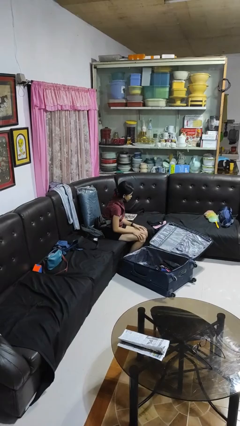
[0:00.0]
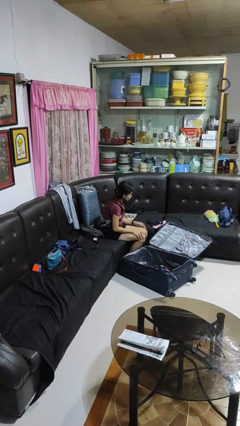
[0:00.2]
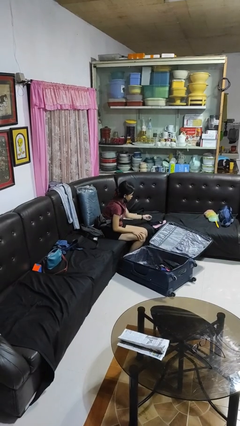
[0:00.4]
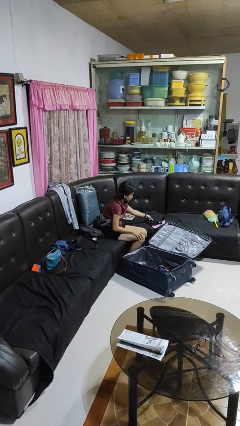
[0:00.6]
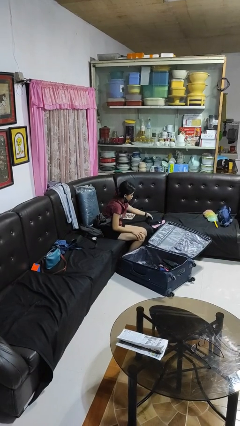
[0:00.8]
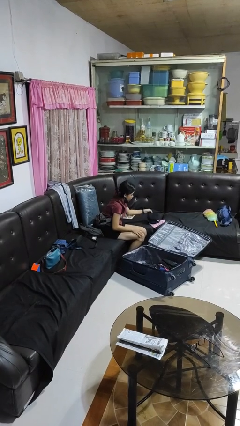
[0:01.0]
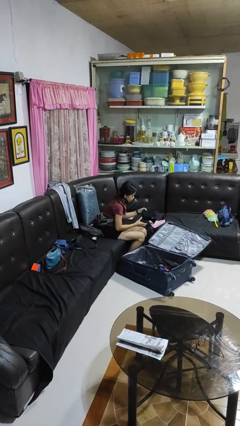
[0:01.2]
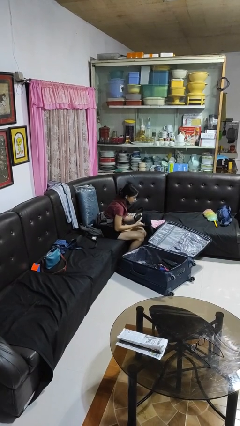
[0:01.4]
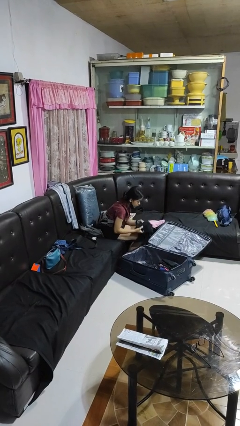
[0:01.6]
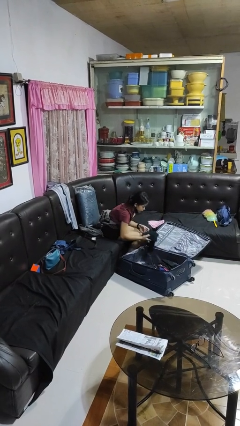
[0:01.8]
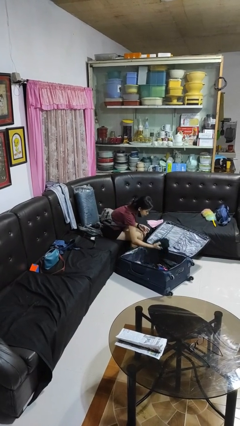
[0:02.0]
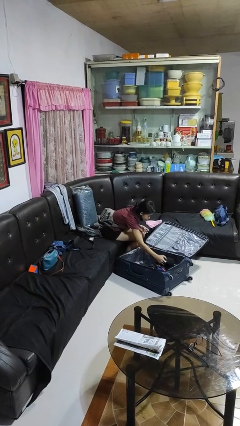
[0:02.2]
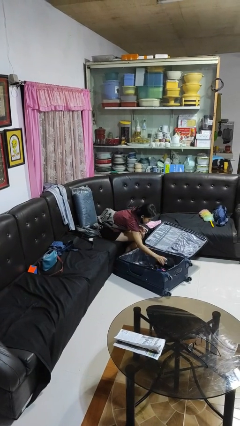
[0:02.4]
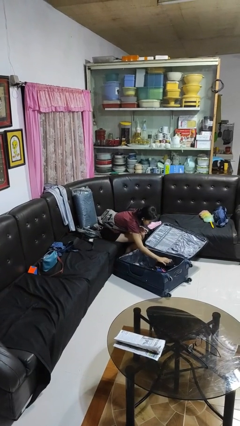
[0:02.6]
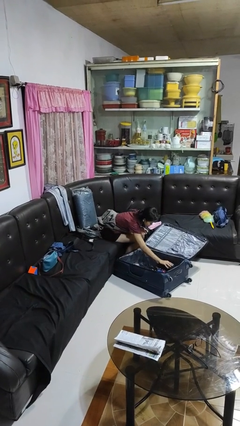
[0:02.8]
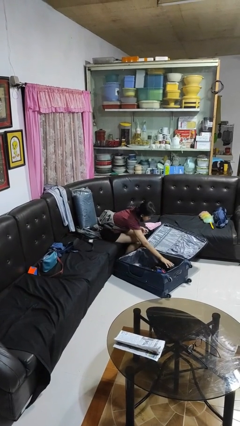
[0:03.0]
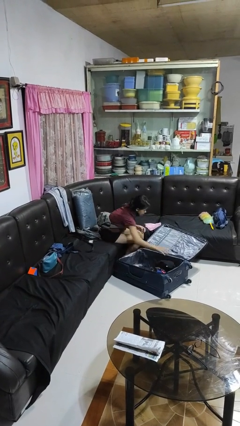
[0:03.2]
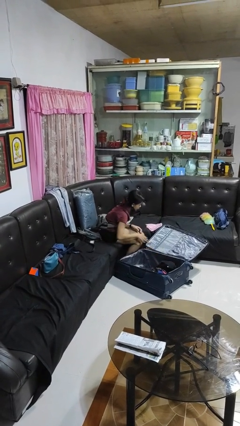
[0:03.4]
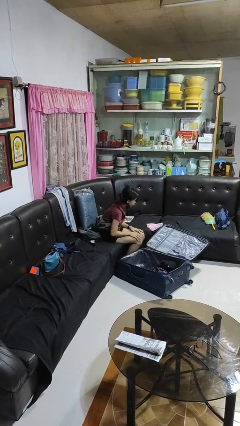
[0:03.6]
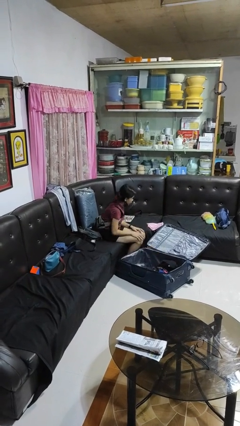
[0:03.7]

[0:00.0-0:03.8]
person loads clothes into suitcase

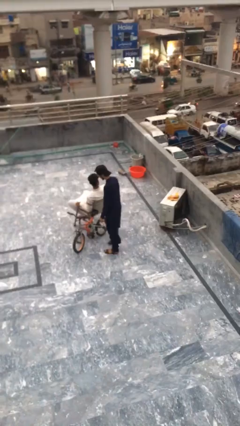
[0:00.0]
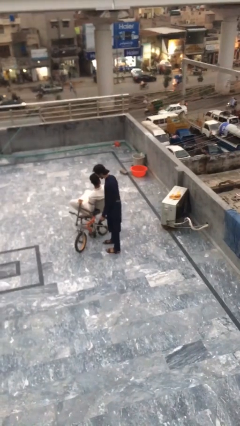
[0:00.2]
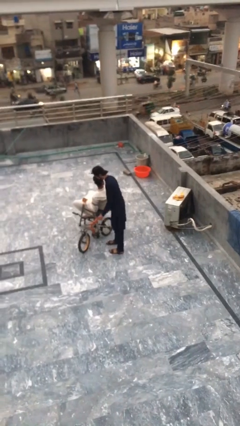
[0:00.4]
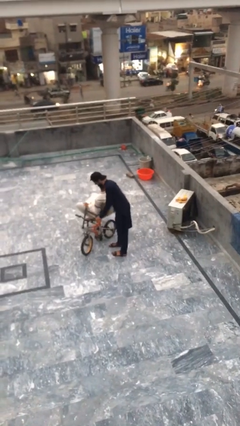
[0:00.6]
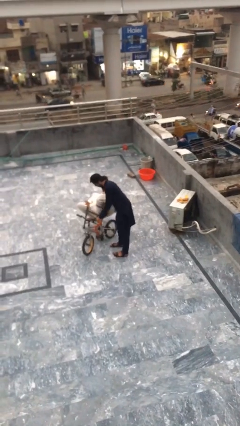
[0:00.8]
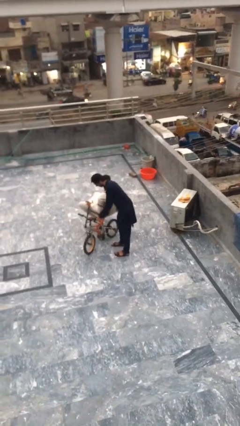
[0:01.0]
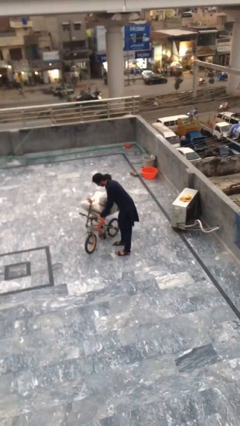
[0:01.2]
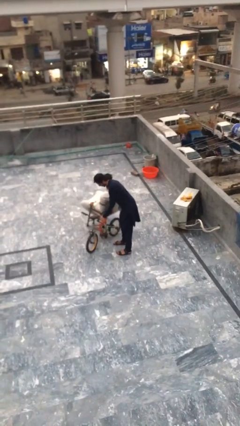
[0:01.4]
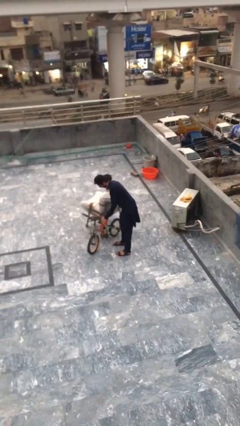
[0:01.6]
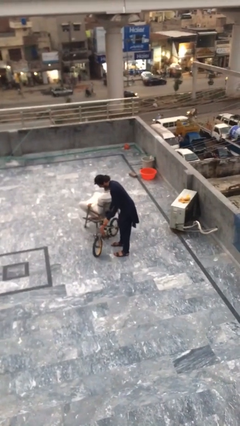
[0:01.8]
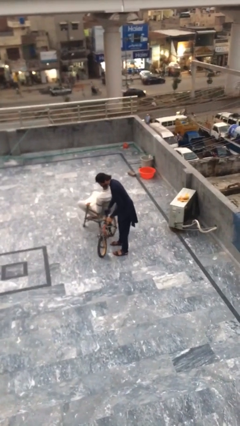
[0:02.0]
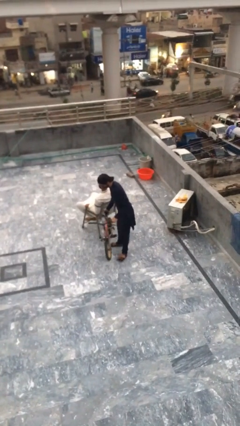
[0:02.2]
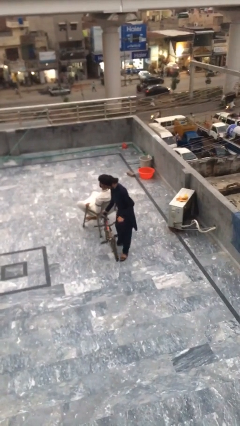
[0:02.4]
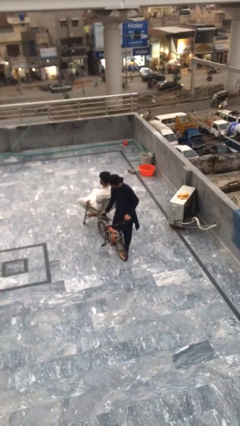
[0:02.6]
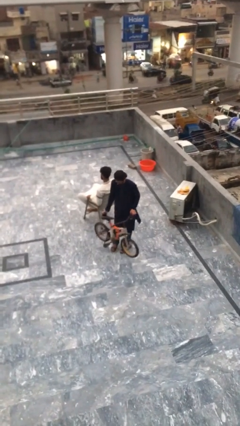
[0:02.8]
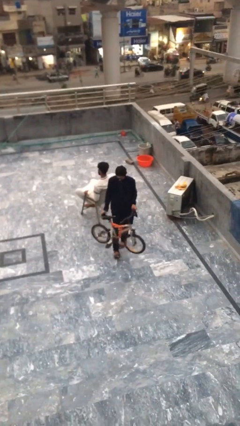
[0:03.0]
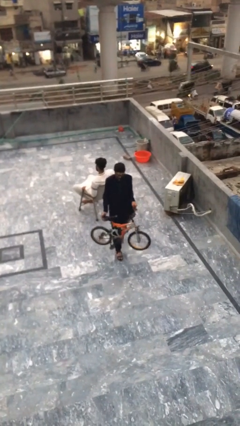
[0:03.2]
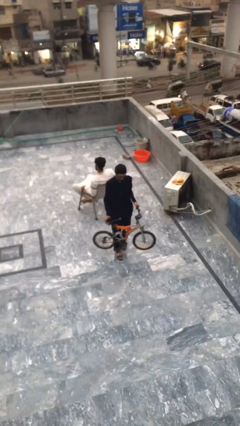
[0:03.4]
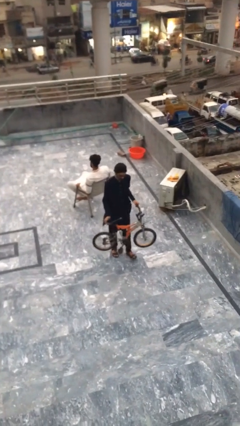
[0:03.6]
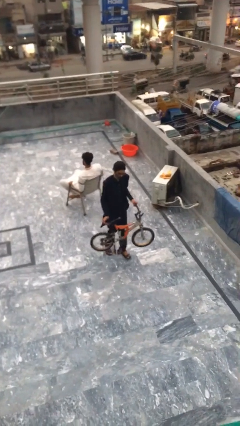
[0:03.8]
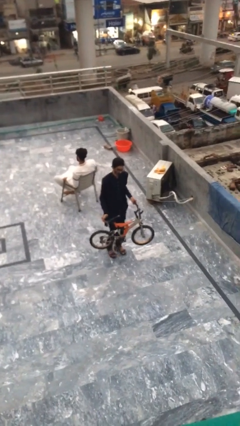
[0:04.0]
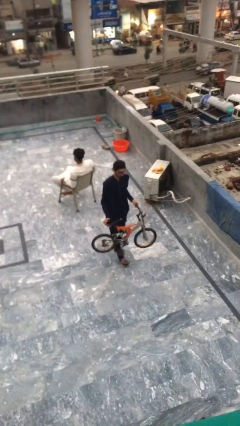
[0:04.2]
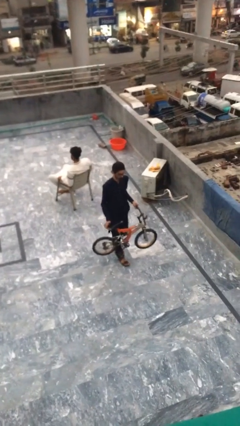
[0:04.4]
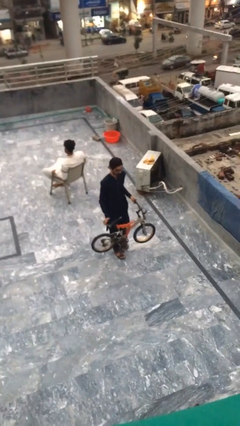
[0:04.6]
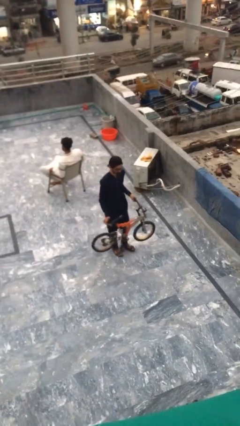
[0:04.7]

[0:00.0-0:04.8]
person steals object from person

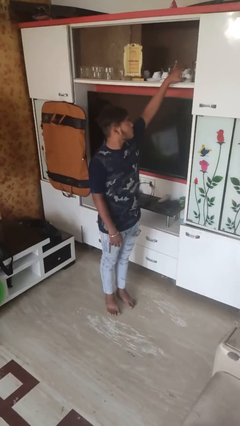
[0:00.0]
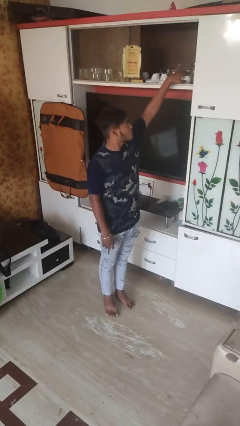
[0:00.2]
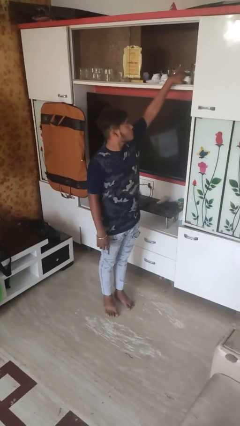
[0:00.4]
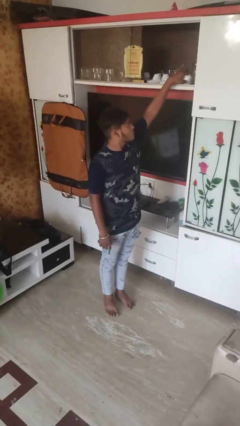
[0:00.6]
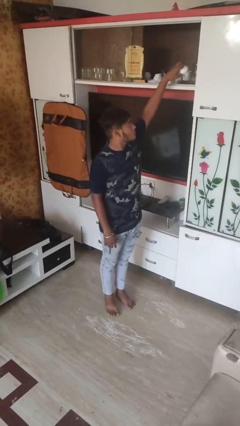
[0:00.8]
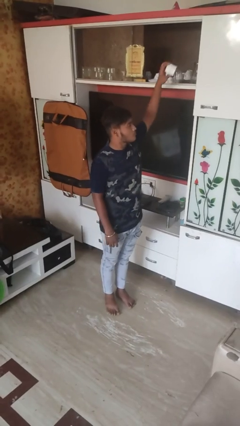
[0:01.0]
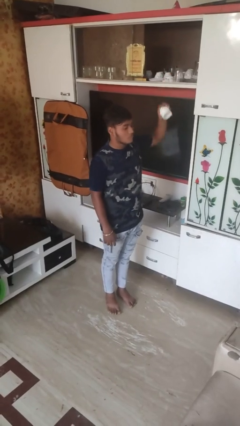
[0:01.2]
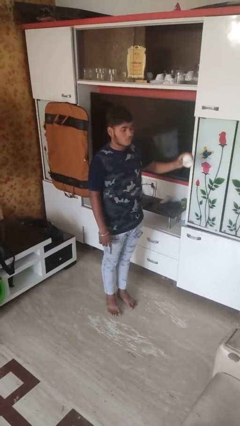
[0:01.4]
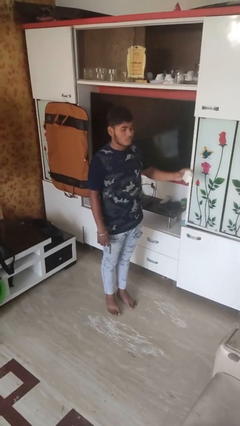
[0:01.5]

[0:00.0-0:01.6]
person takes object from cabinet

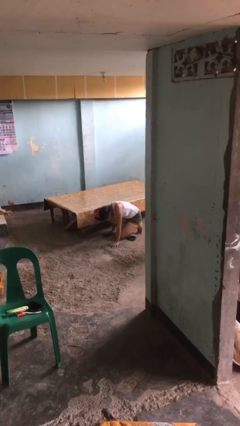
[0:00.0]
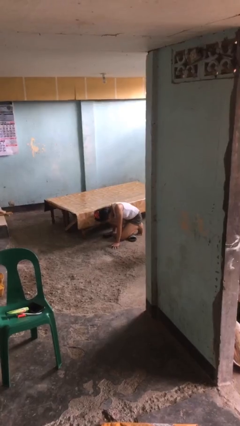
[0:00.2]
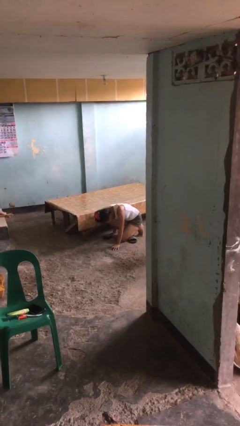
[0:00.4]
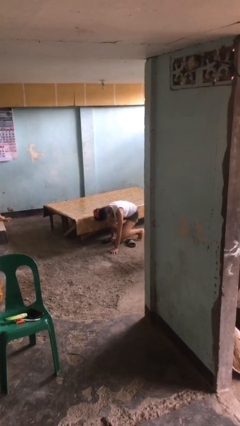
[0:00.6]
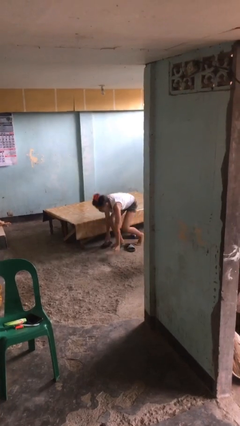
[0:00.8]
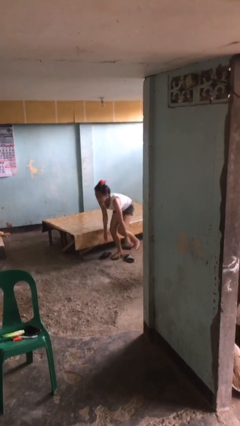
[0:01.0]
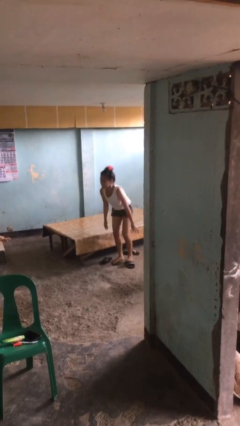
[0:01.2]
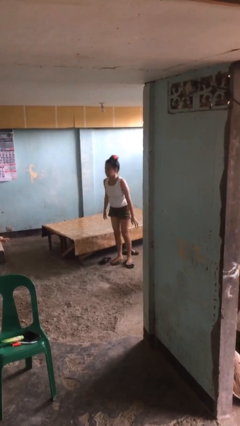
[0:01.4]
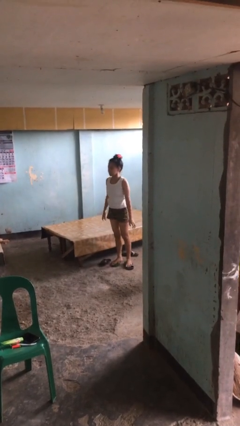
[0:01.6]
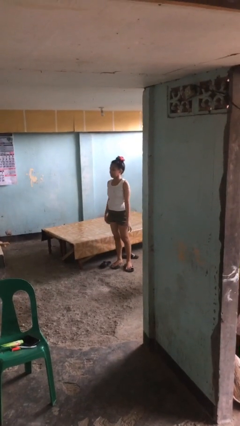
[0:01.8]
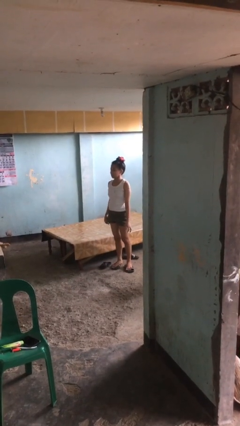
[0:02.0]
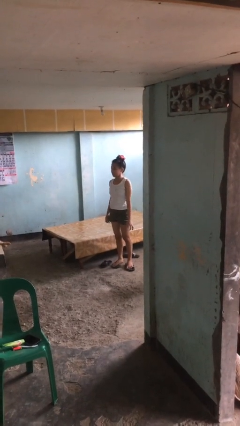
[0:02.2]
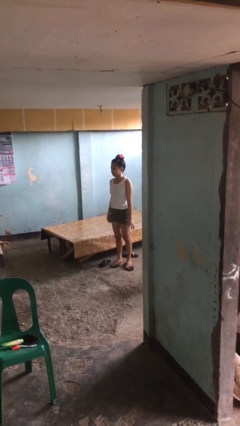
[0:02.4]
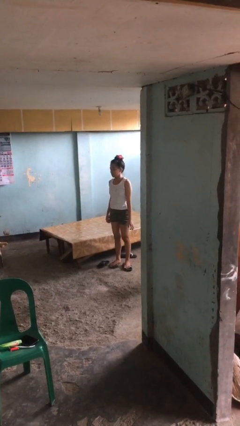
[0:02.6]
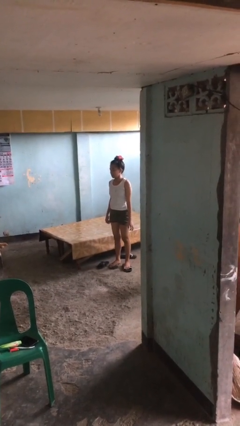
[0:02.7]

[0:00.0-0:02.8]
person stands up from floor

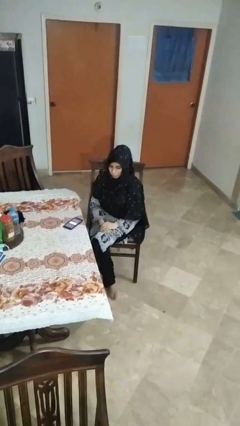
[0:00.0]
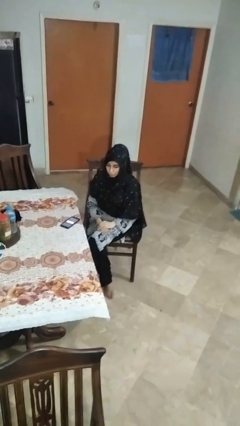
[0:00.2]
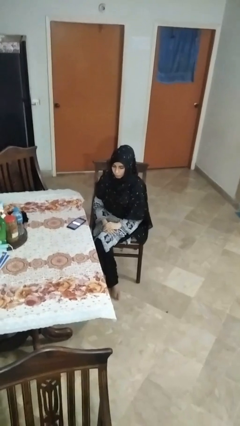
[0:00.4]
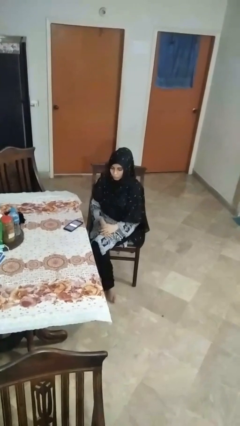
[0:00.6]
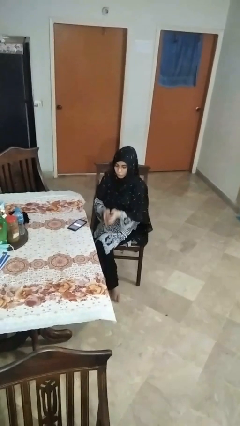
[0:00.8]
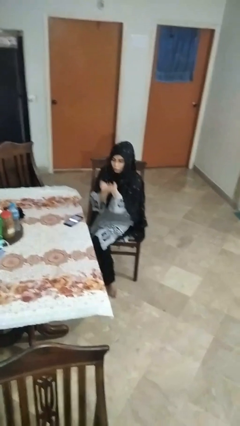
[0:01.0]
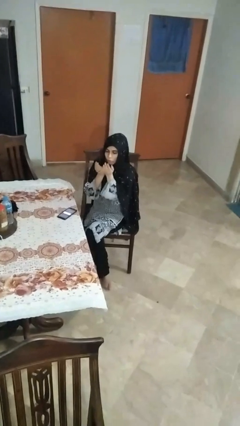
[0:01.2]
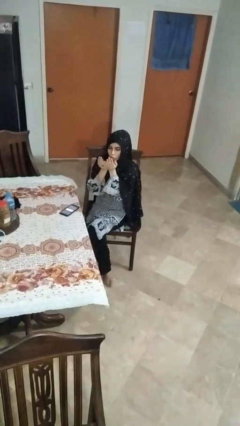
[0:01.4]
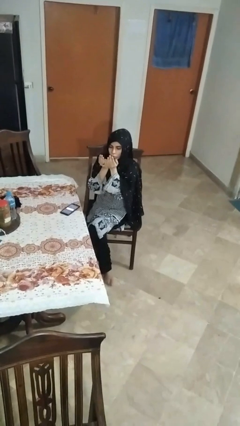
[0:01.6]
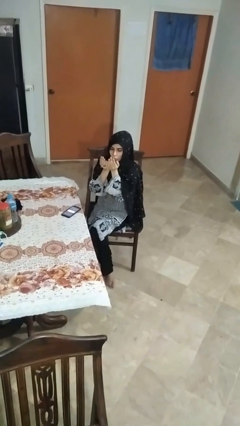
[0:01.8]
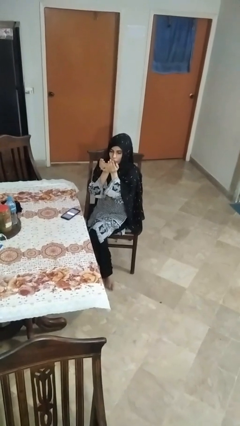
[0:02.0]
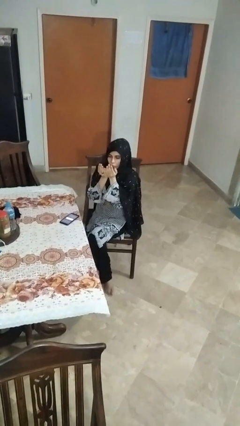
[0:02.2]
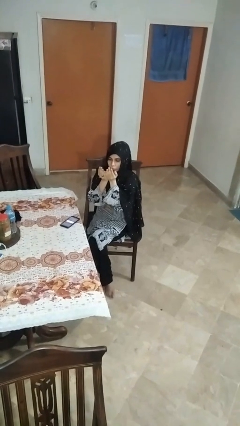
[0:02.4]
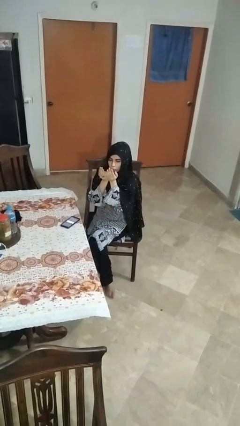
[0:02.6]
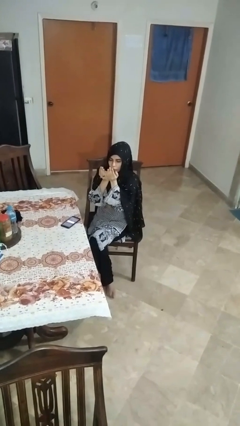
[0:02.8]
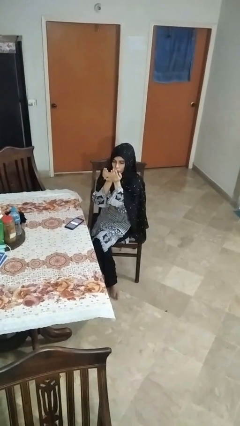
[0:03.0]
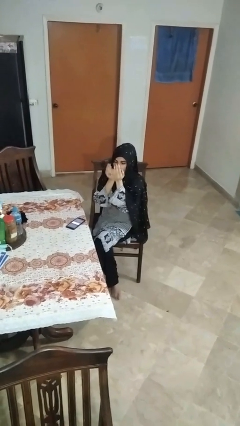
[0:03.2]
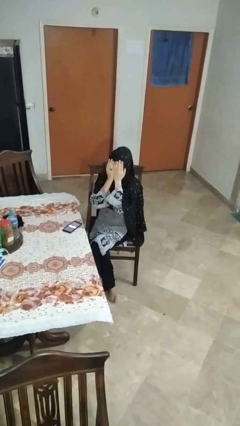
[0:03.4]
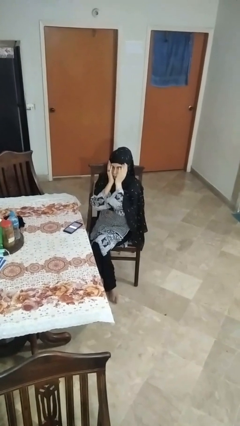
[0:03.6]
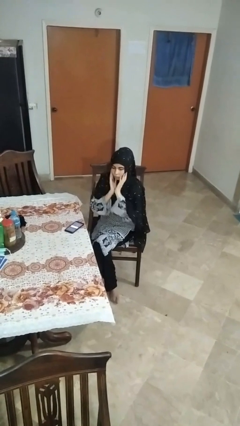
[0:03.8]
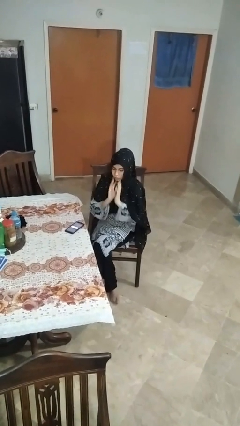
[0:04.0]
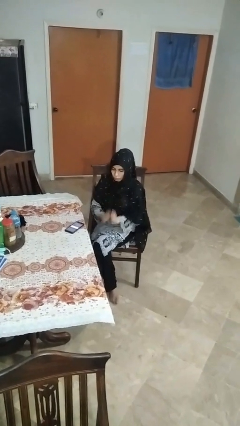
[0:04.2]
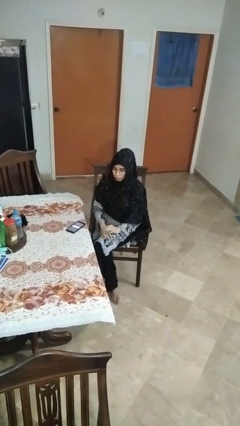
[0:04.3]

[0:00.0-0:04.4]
person prays
